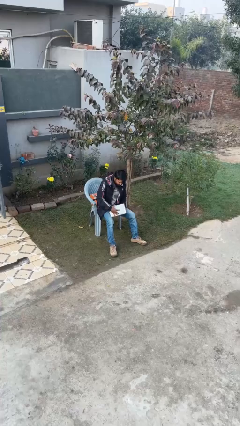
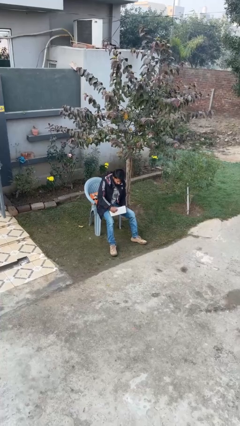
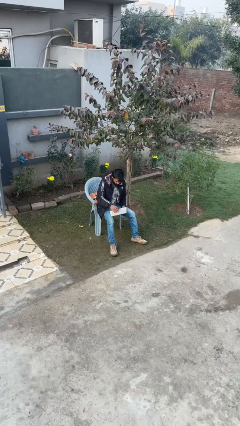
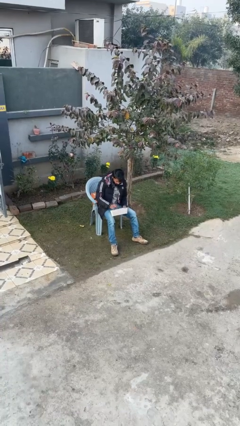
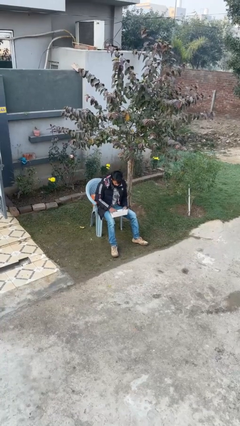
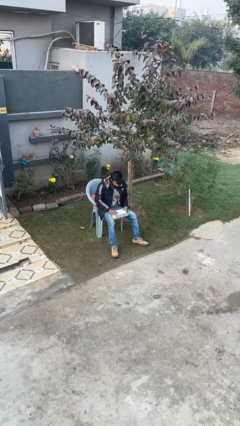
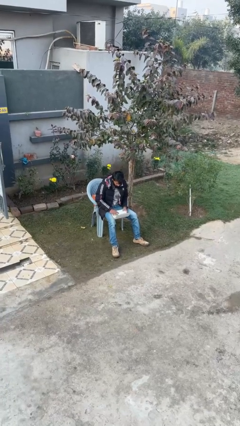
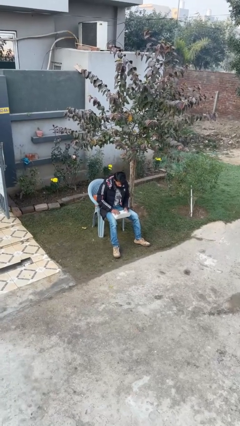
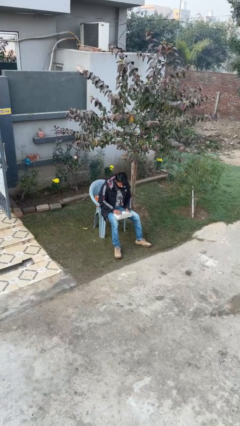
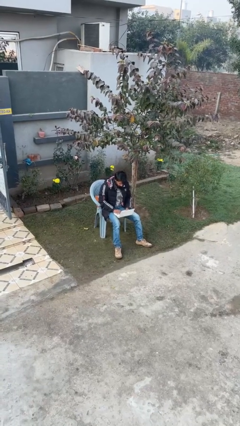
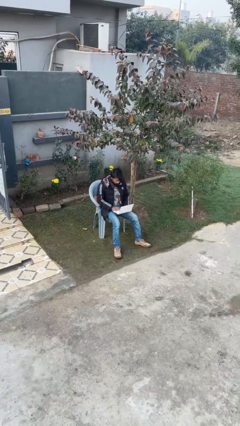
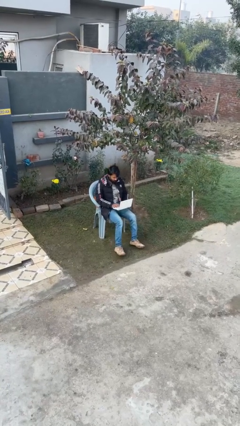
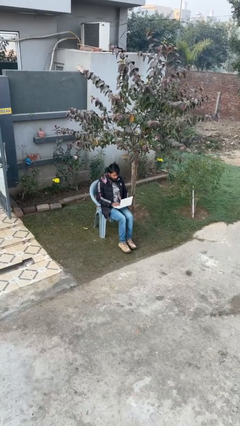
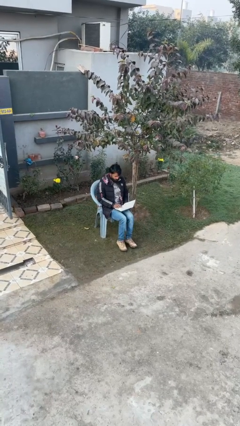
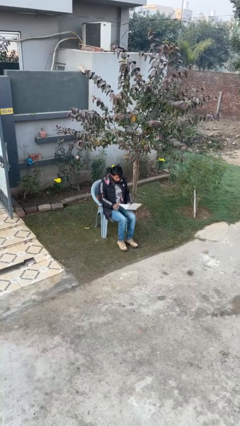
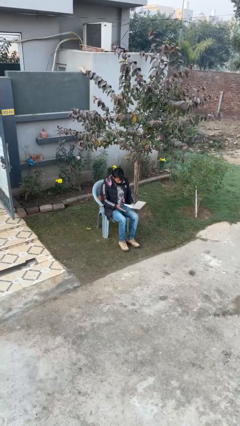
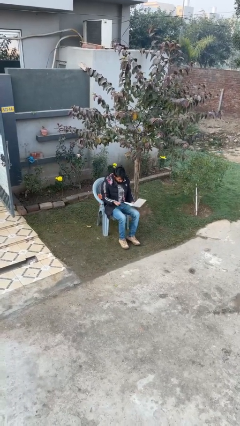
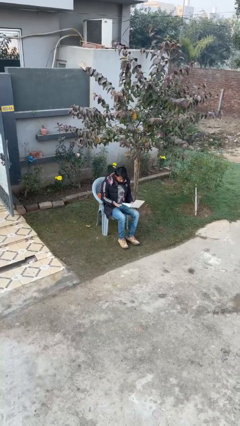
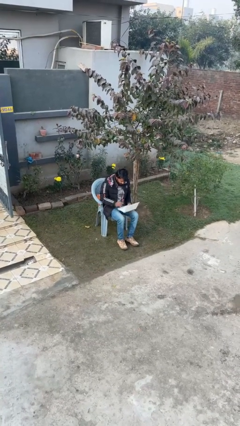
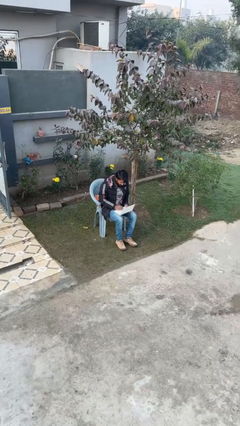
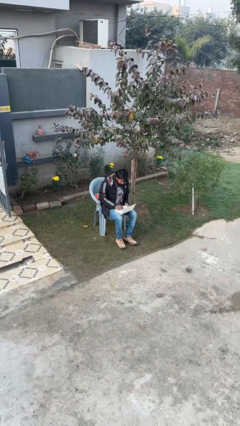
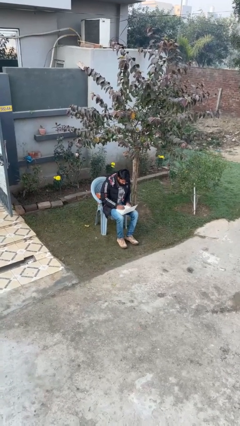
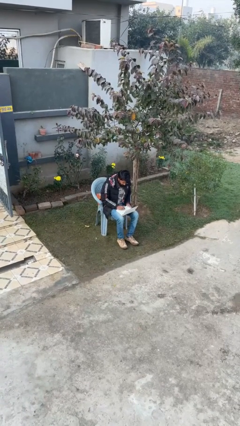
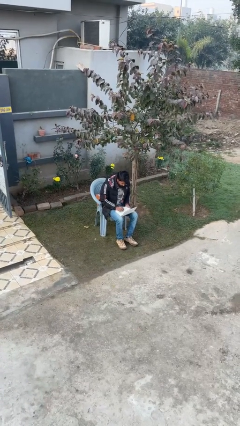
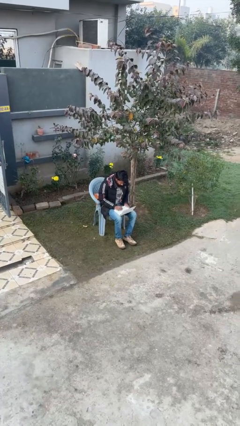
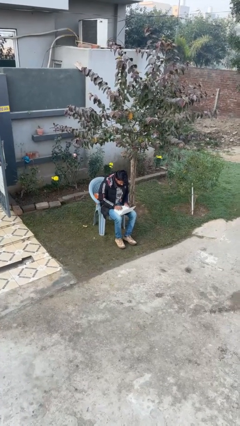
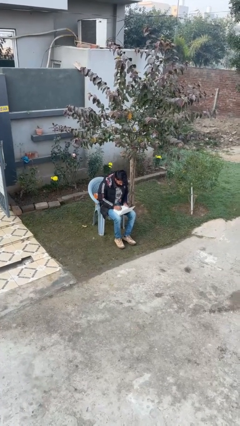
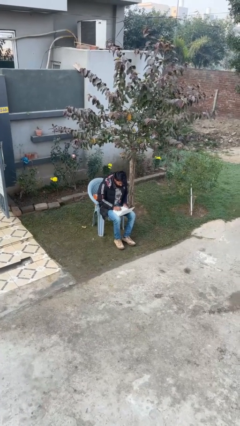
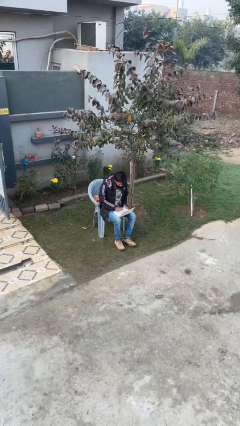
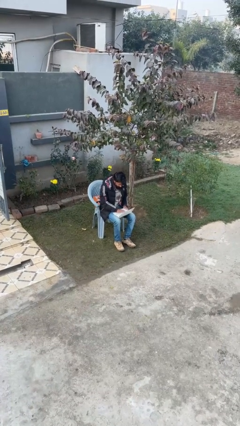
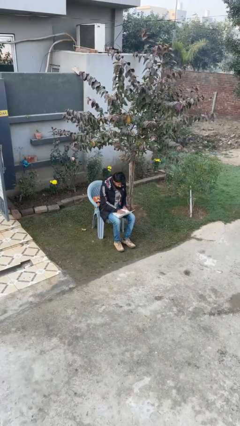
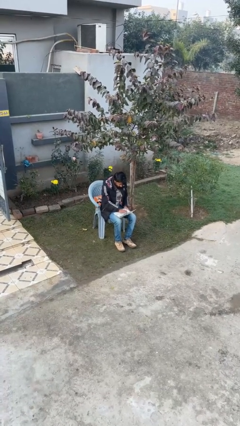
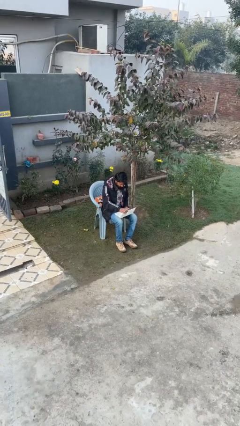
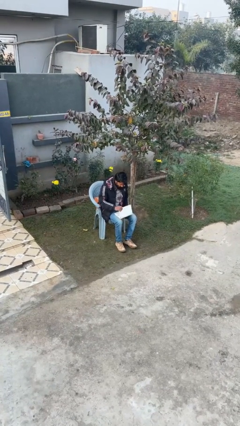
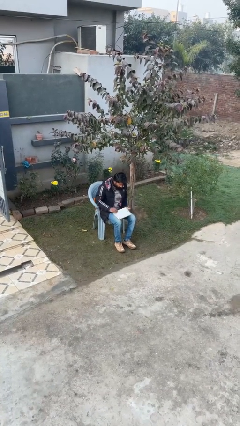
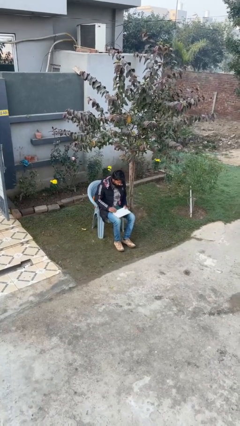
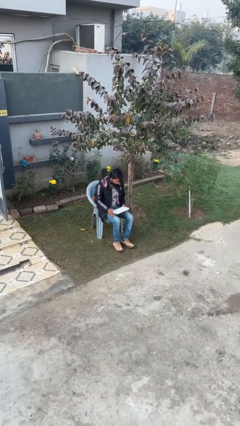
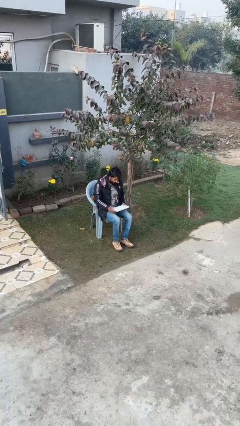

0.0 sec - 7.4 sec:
person interacts with laptop

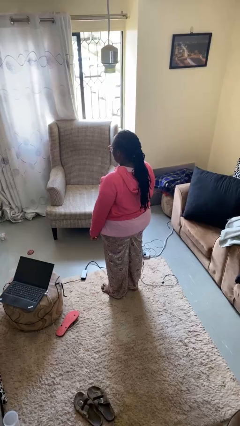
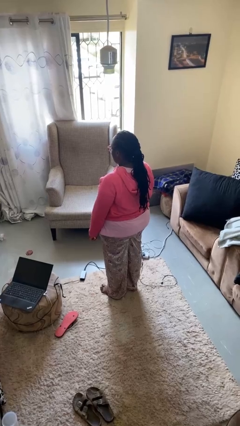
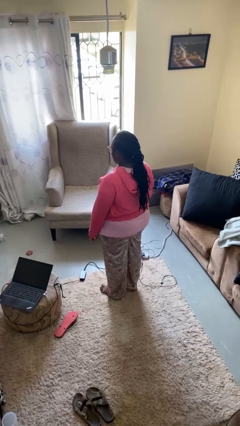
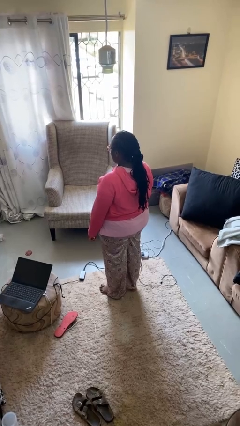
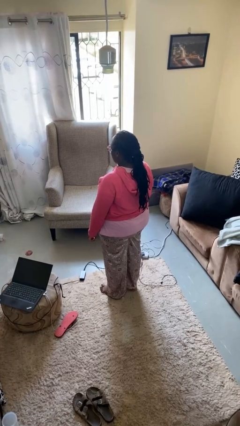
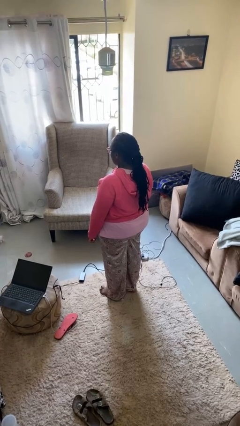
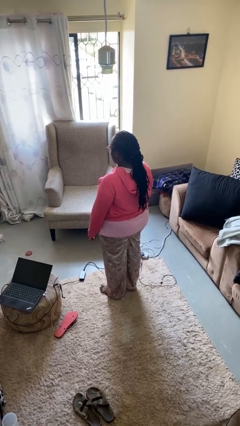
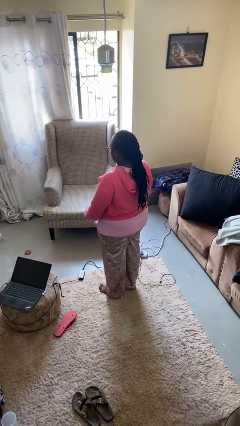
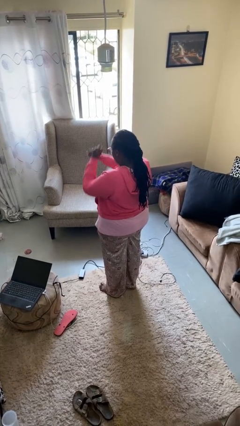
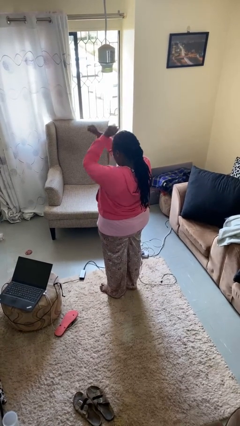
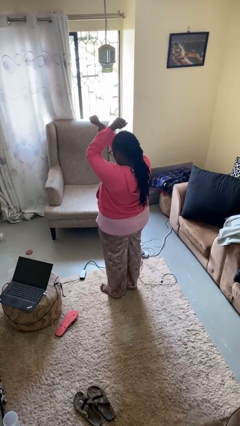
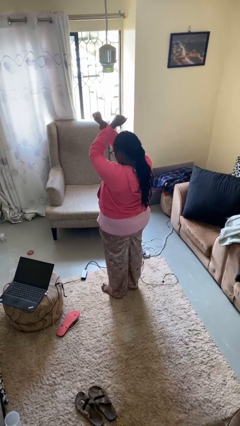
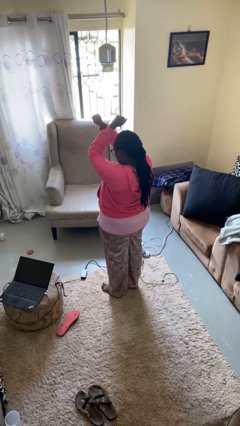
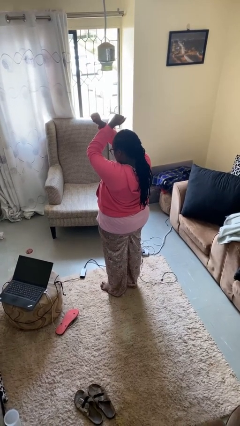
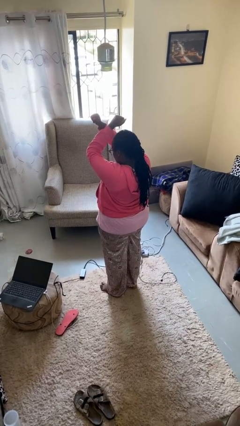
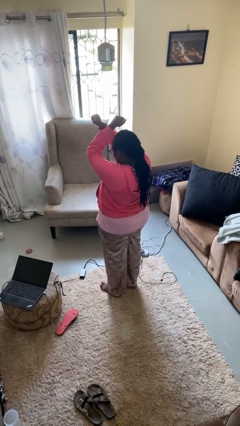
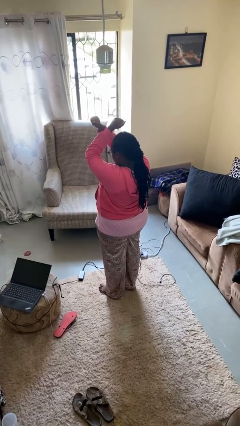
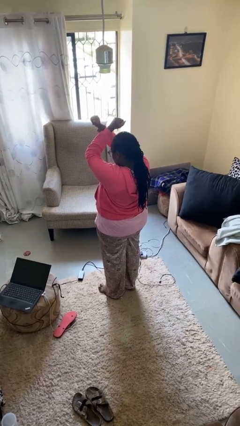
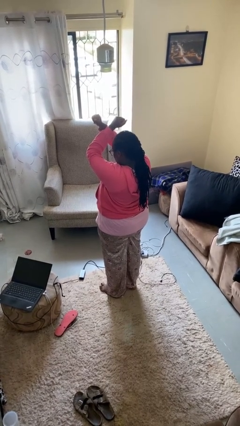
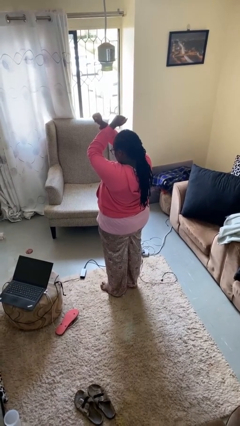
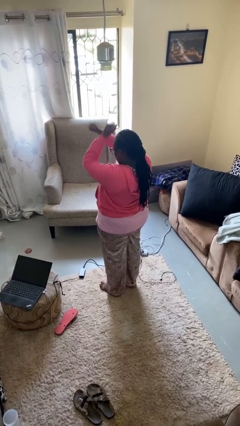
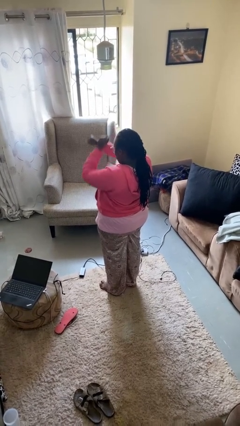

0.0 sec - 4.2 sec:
person gestures arms x

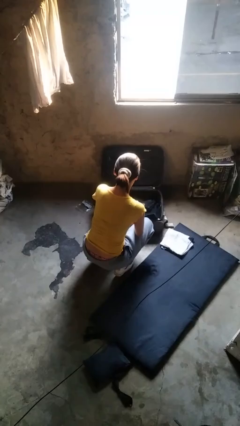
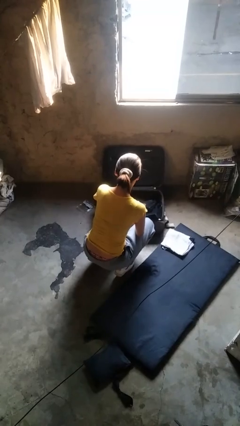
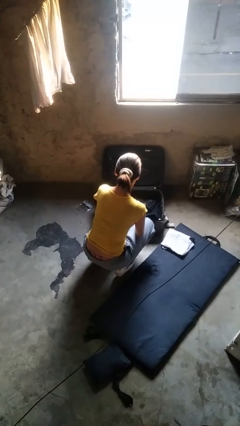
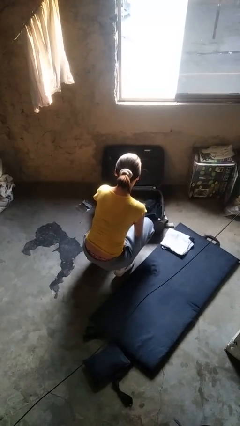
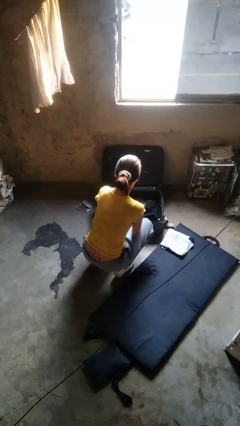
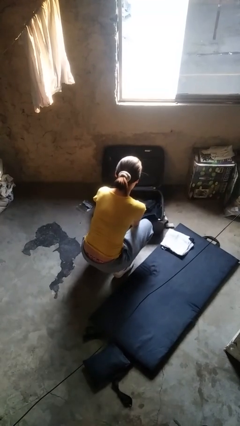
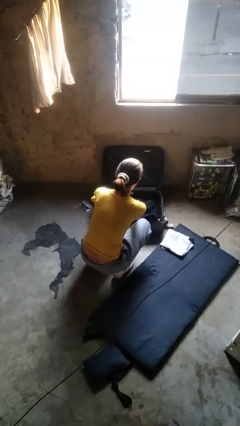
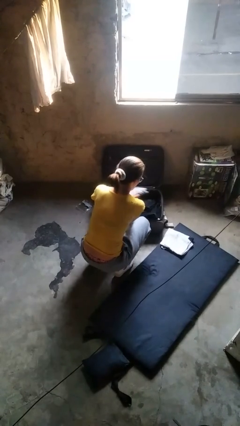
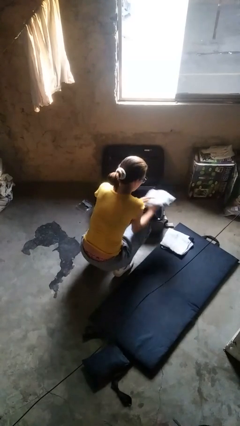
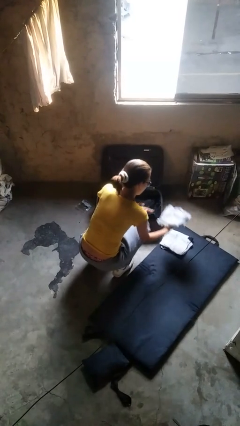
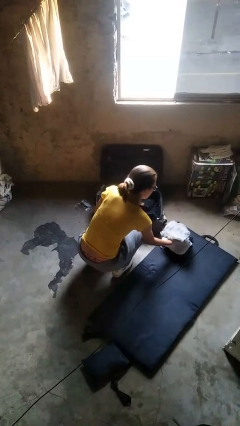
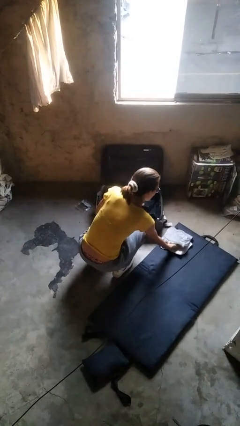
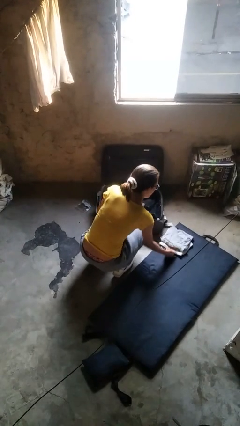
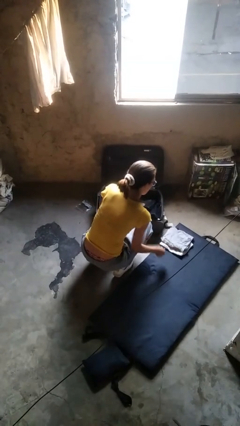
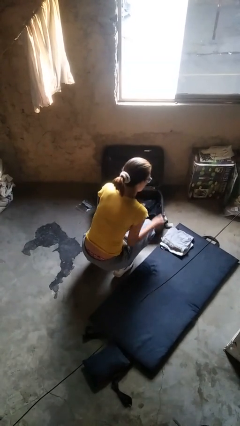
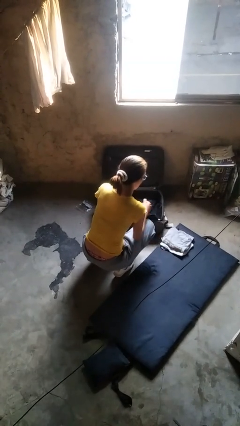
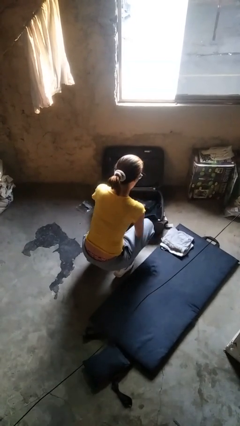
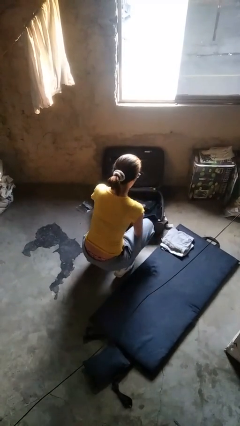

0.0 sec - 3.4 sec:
person unloads clothes from suitcase

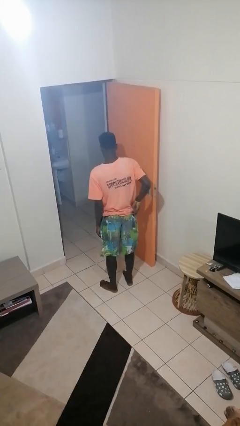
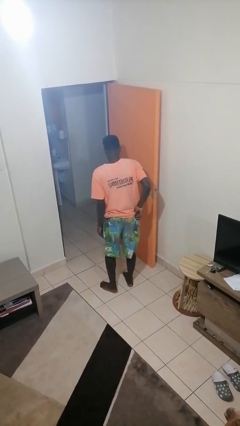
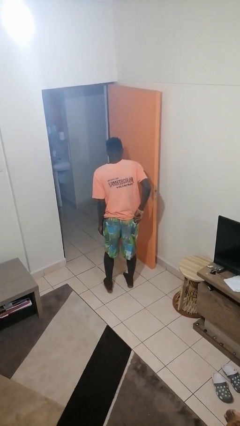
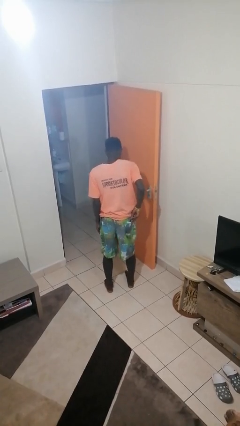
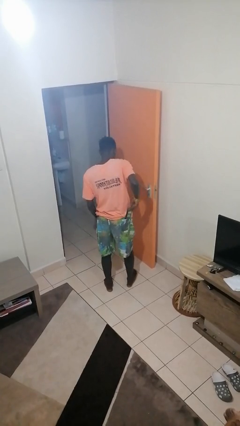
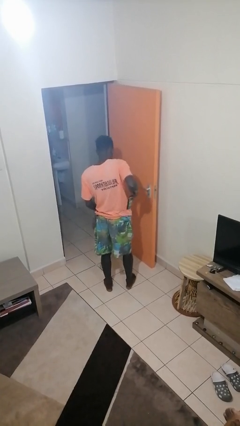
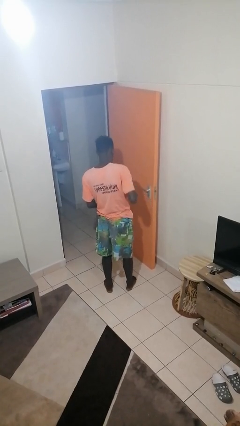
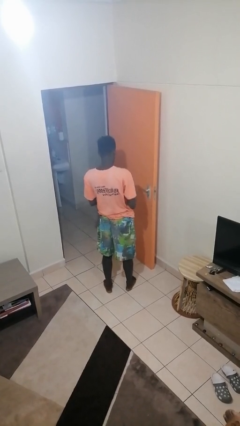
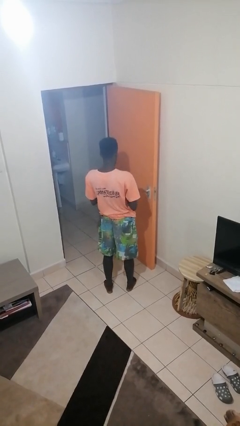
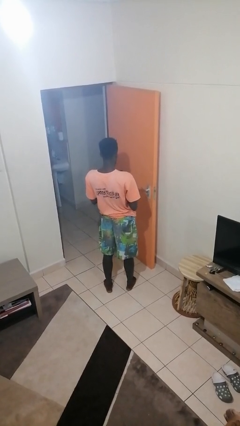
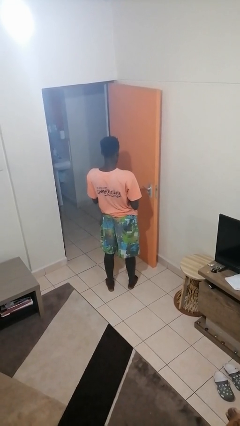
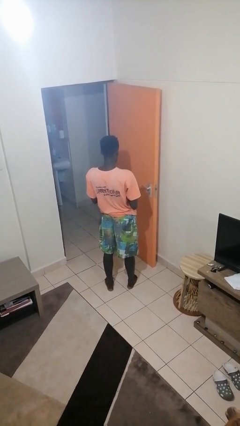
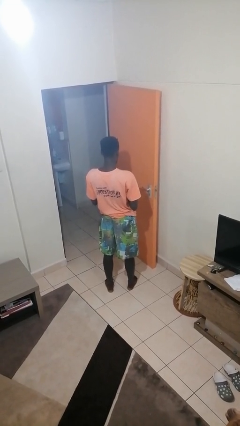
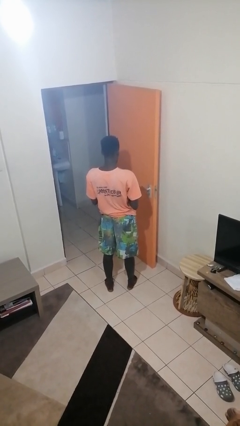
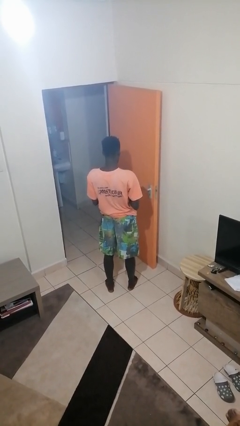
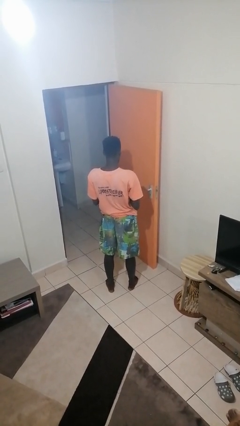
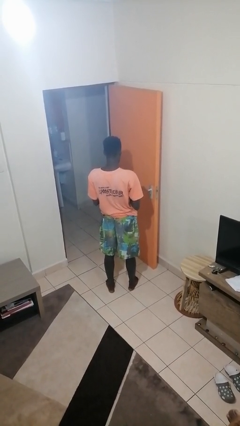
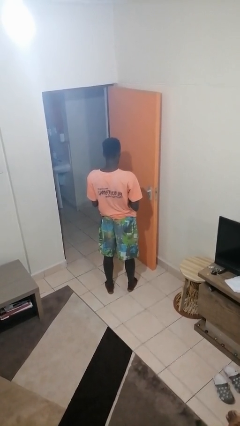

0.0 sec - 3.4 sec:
person takes phone from pocket
